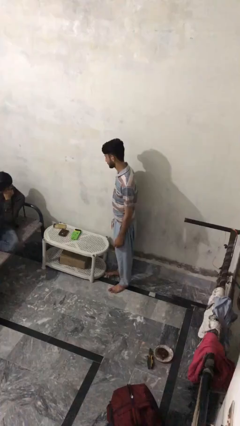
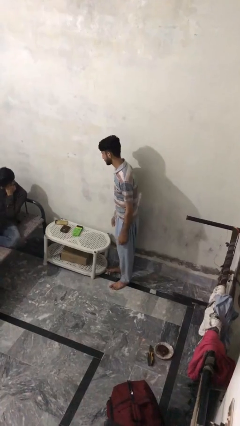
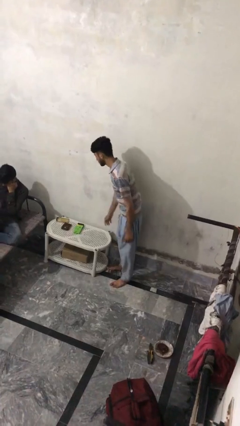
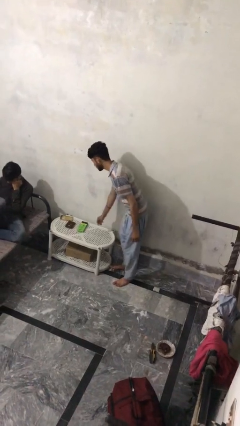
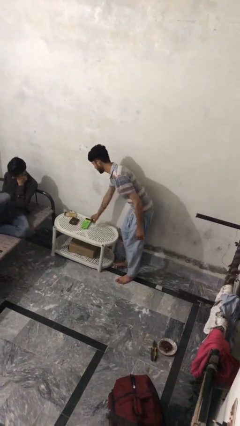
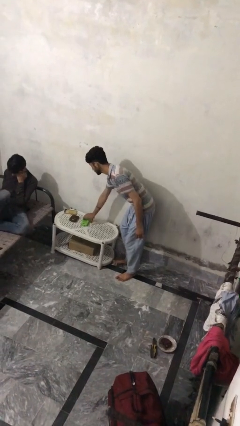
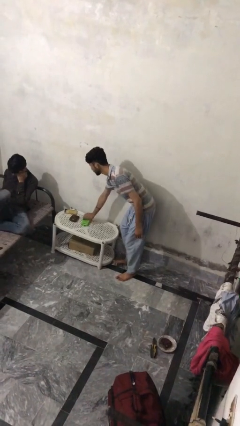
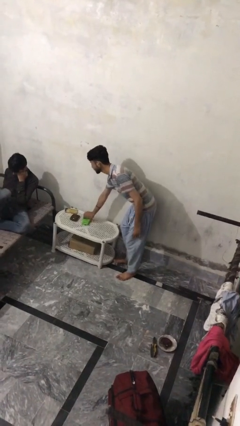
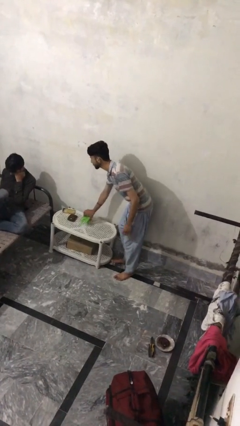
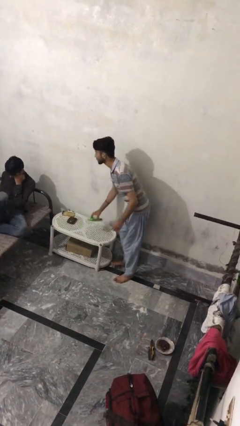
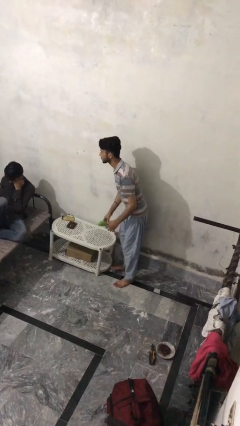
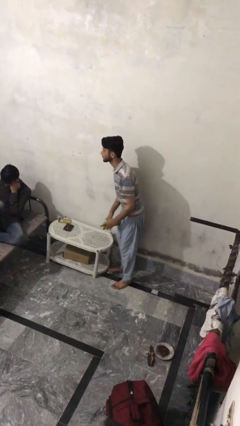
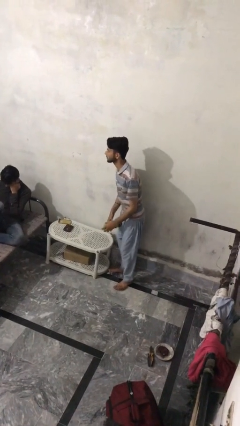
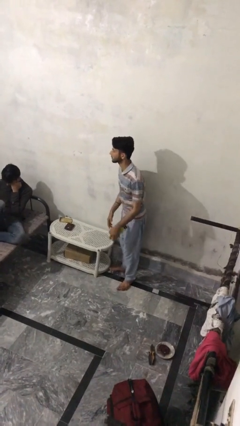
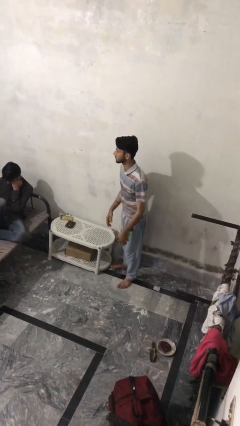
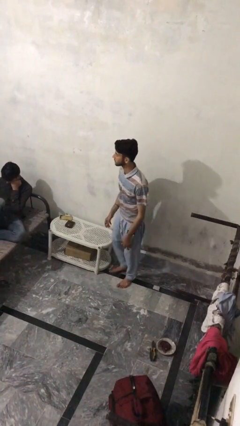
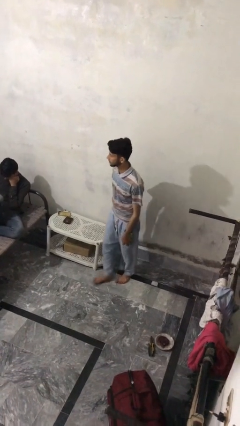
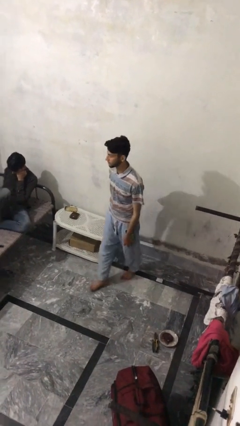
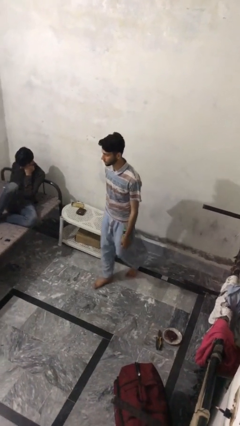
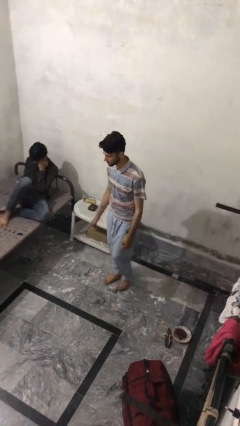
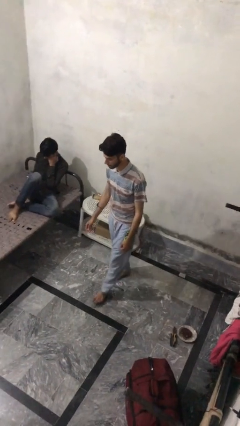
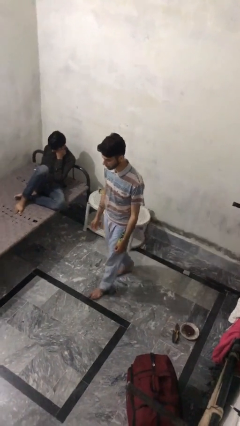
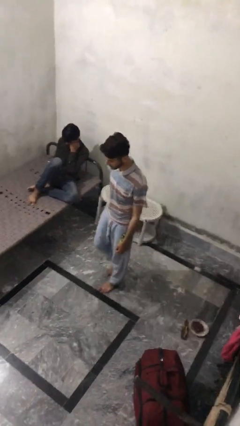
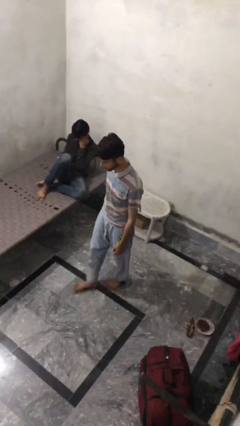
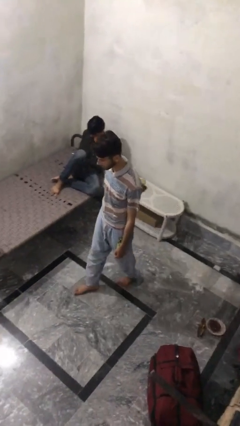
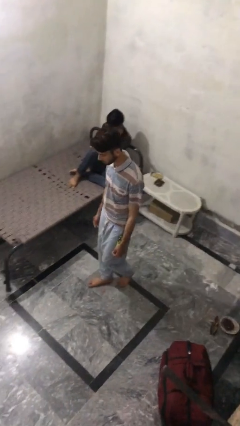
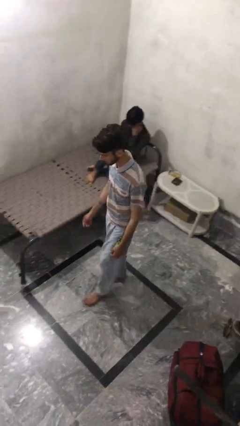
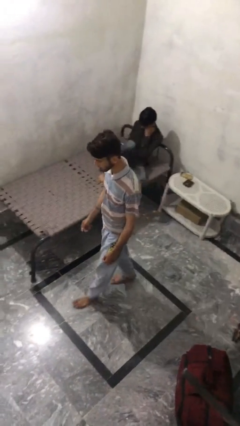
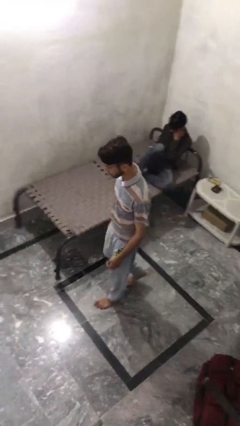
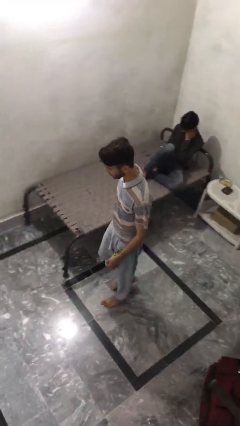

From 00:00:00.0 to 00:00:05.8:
person steals object from person

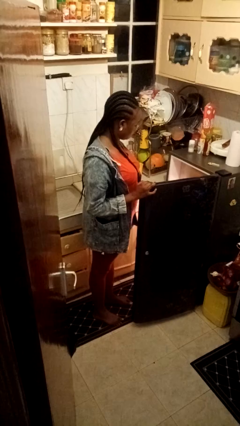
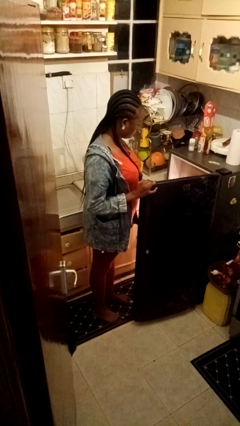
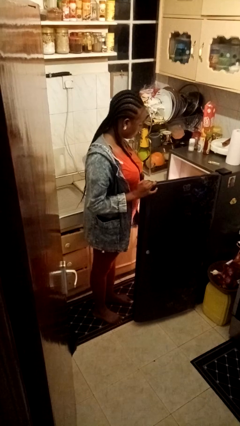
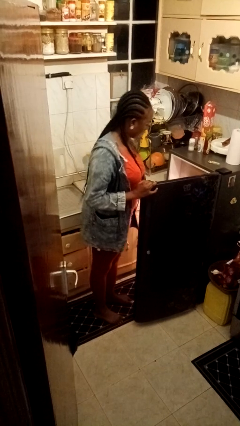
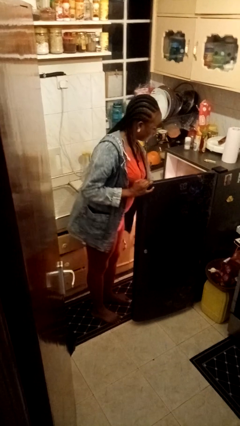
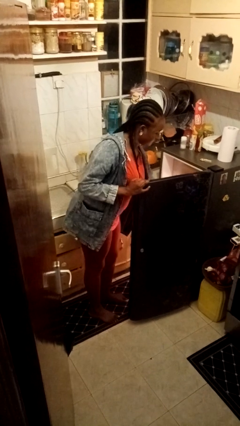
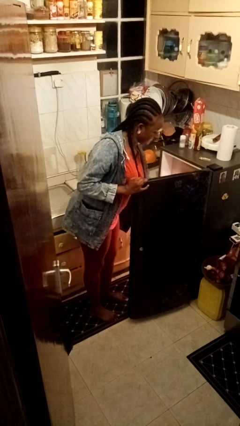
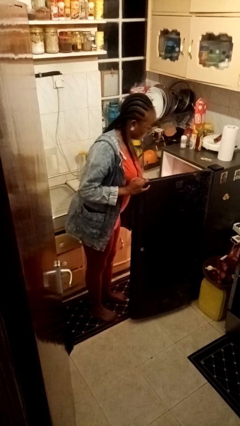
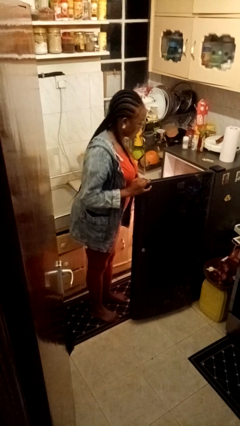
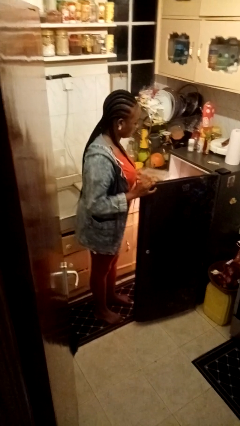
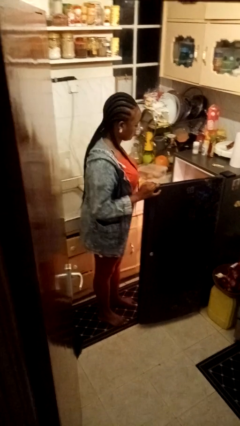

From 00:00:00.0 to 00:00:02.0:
person takes object from refrigerator

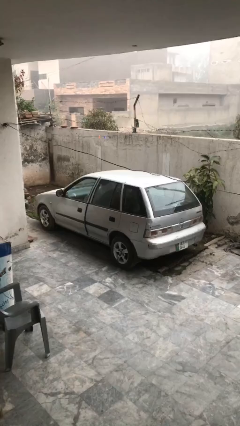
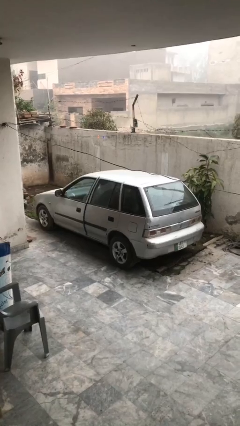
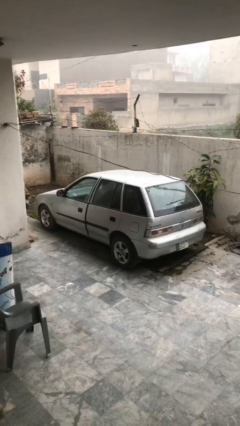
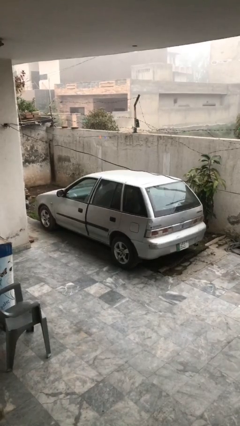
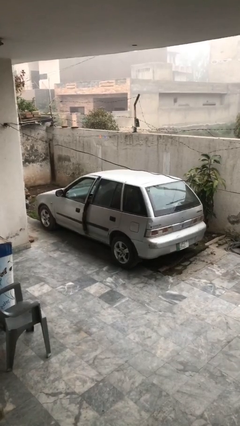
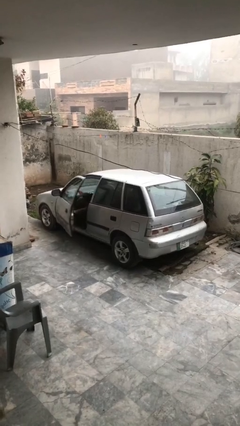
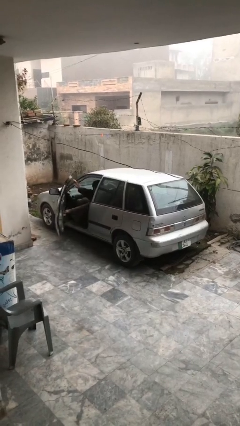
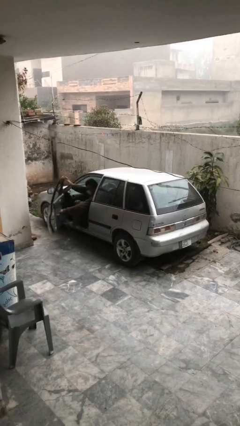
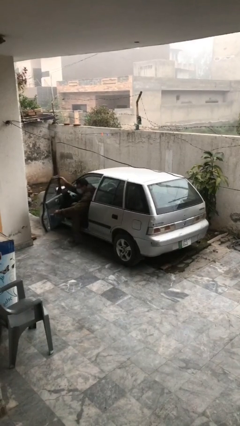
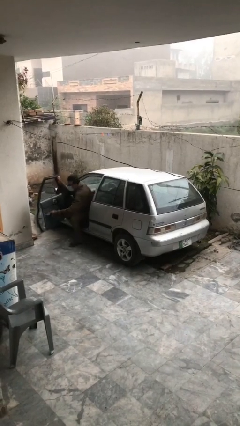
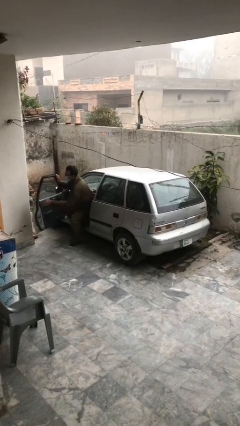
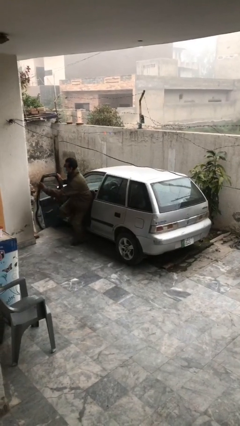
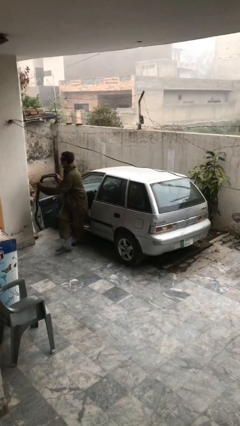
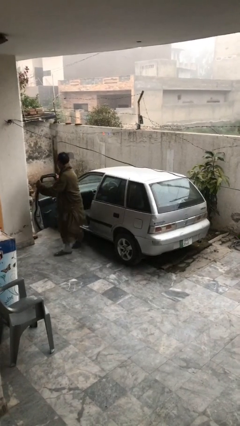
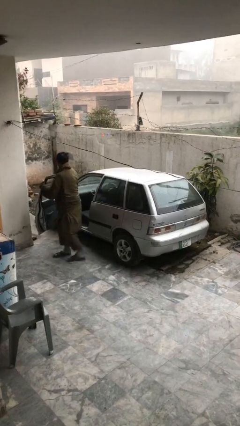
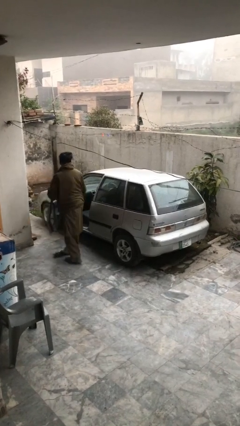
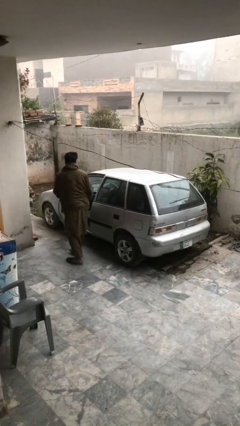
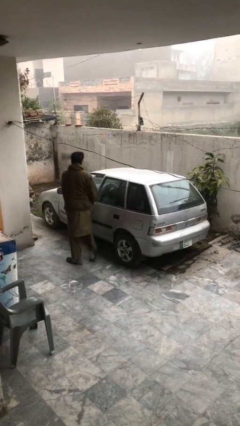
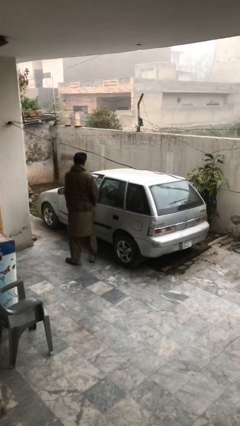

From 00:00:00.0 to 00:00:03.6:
car drops off person

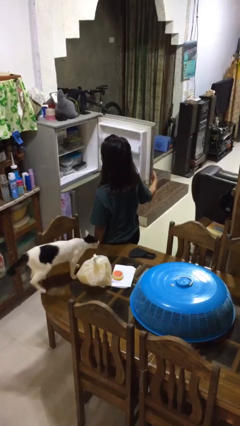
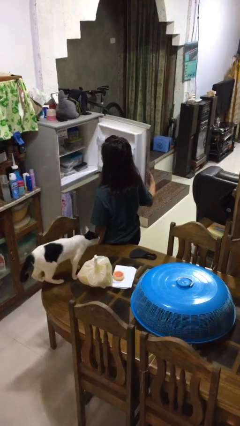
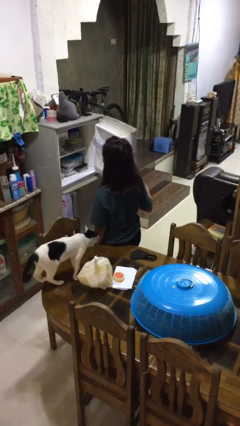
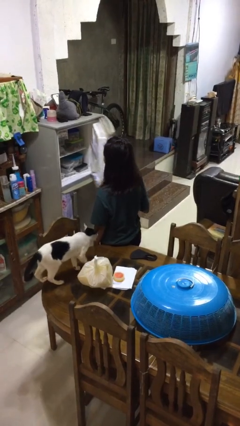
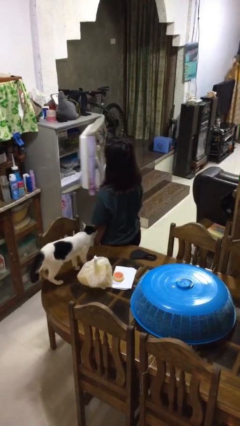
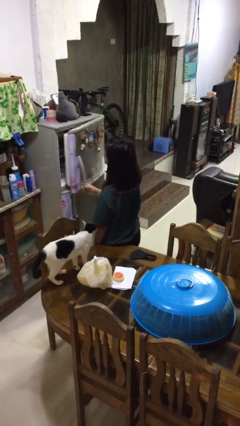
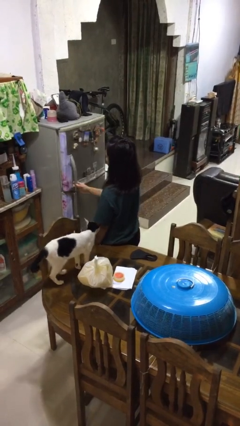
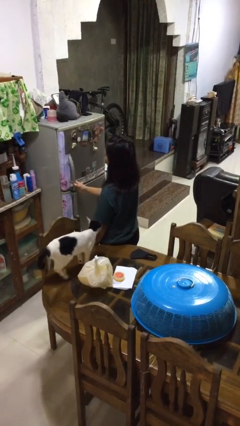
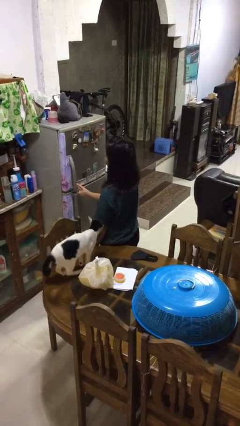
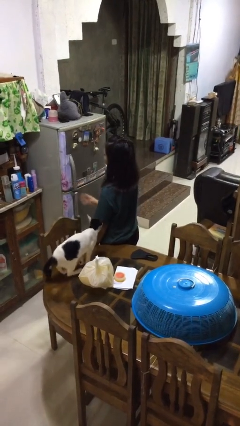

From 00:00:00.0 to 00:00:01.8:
person closes refrigerator

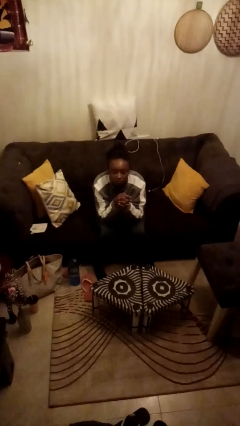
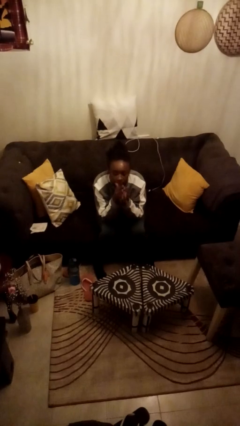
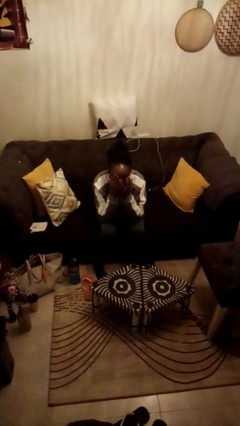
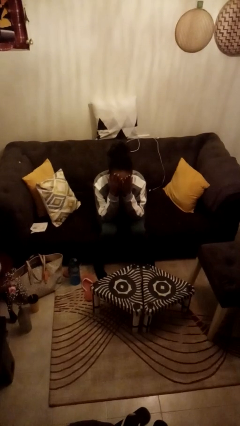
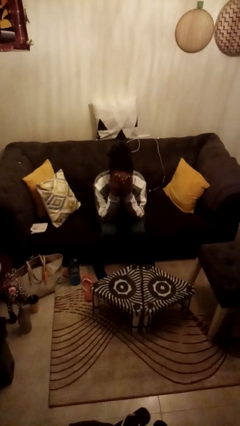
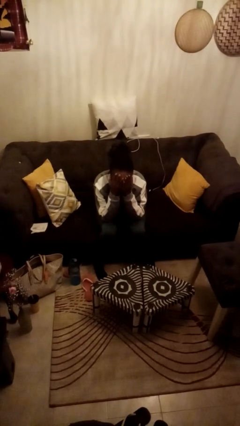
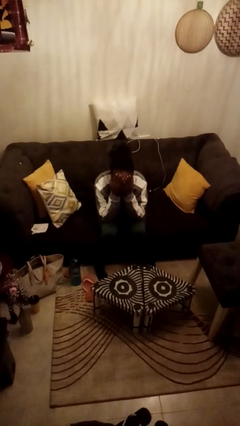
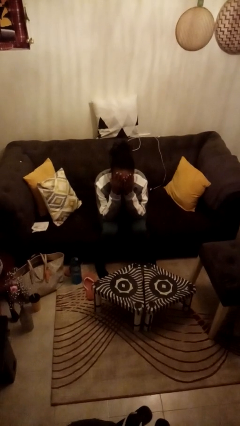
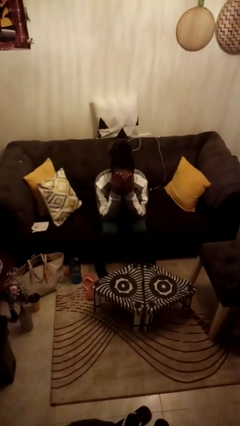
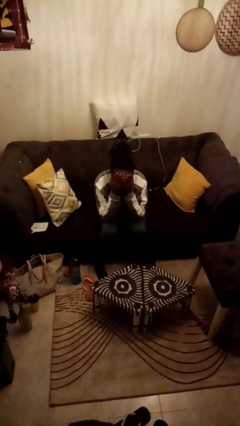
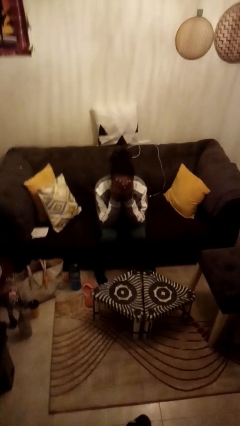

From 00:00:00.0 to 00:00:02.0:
person covers face with hands

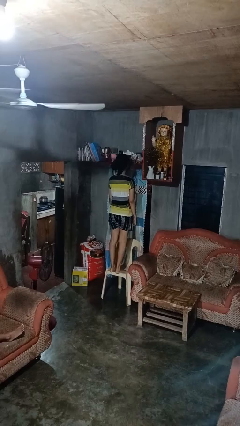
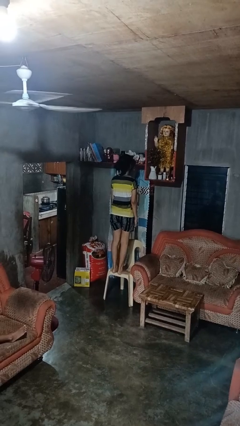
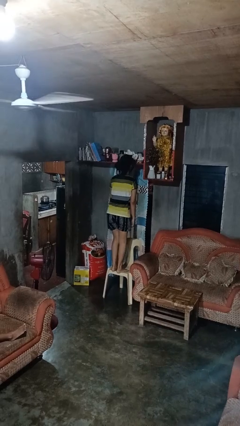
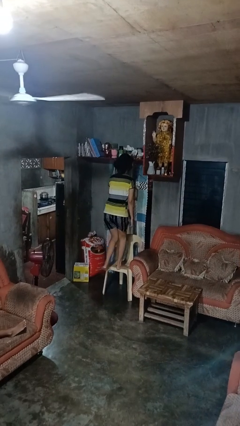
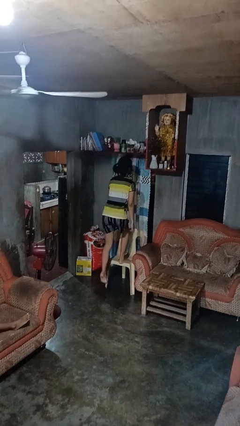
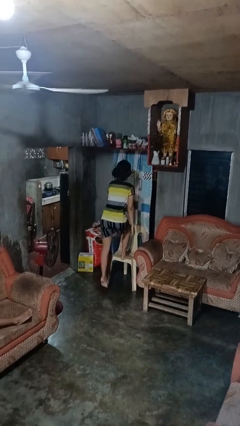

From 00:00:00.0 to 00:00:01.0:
person climbs off chair

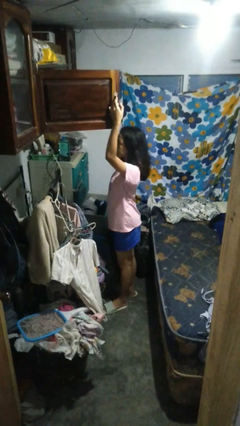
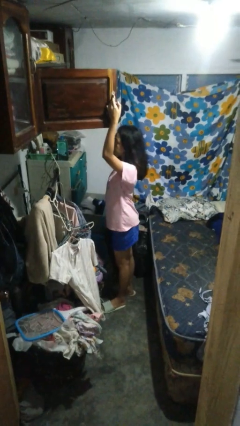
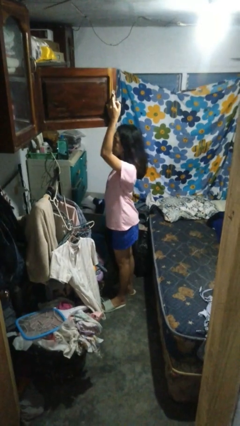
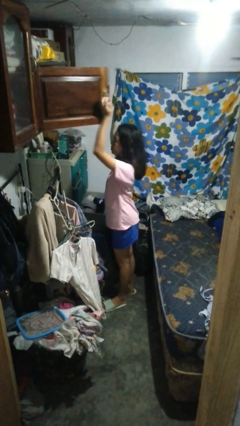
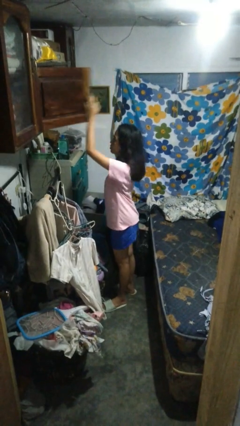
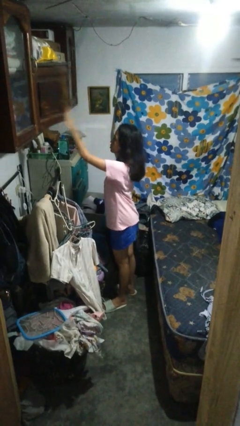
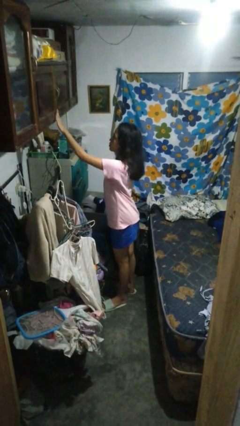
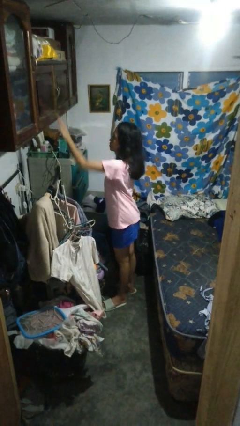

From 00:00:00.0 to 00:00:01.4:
person closes closet door
